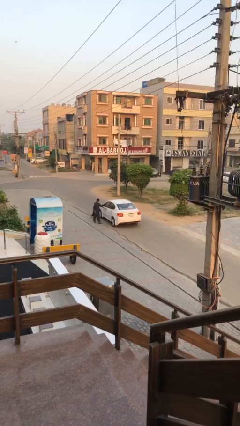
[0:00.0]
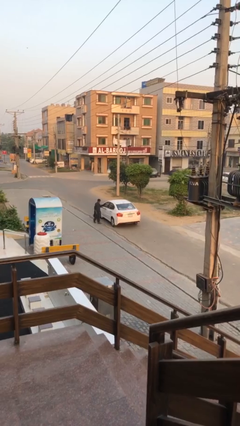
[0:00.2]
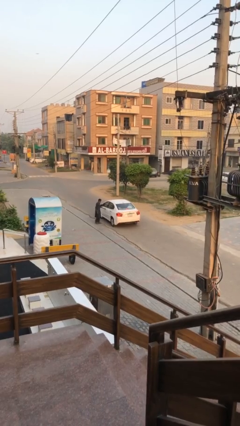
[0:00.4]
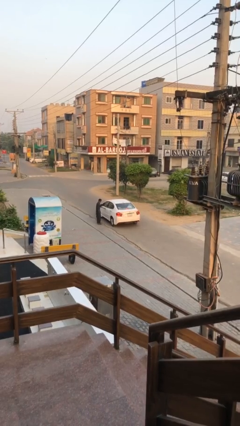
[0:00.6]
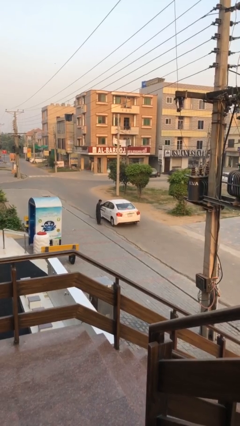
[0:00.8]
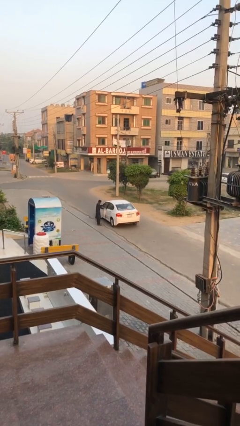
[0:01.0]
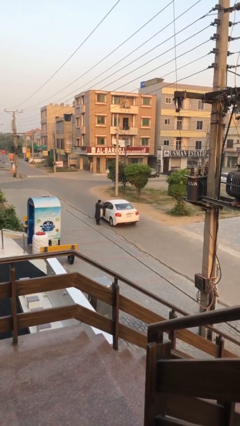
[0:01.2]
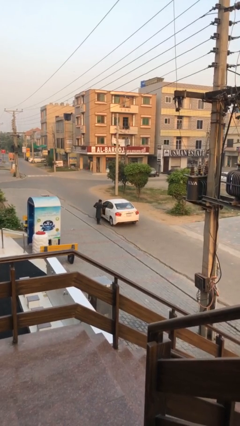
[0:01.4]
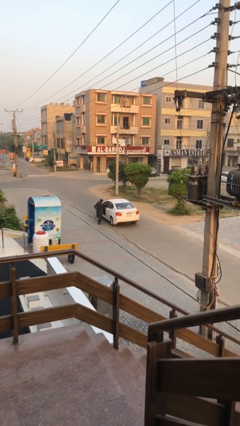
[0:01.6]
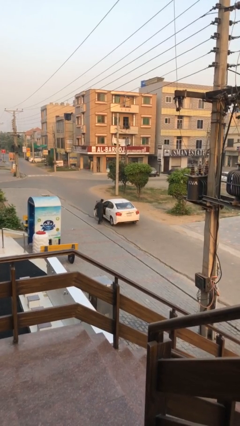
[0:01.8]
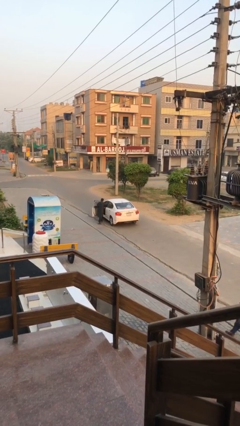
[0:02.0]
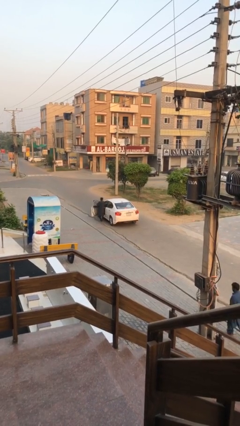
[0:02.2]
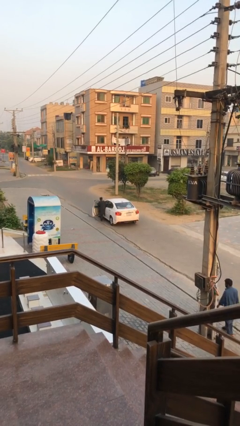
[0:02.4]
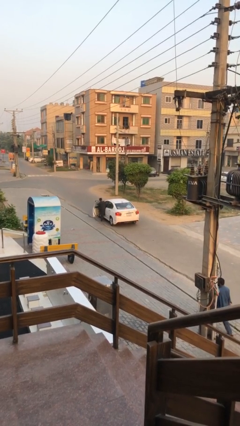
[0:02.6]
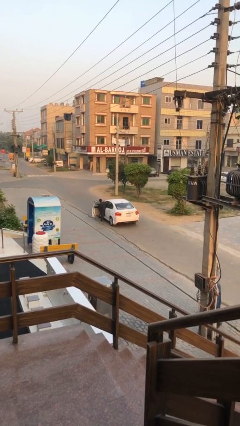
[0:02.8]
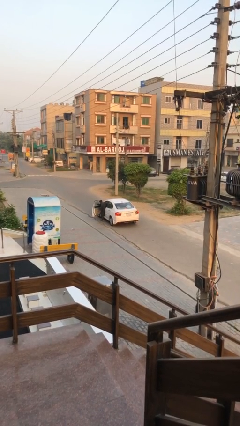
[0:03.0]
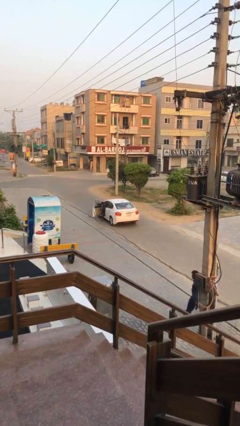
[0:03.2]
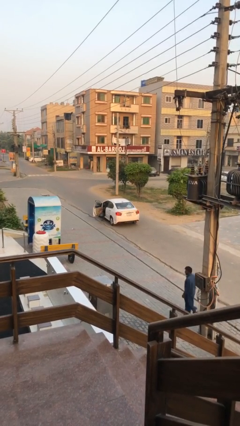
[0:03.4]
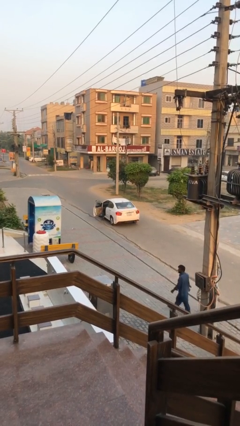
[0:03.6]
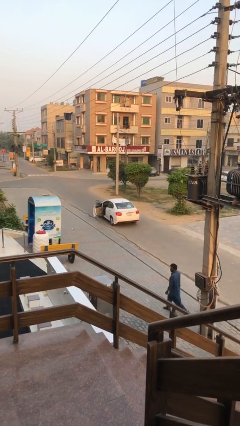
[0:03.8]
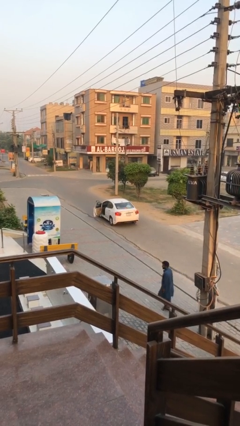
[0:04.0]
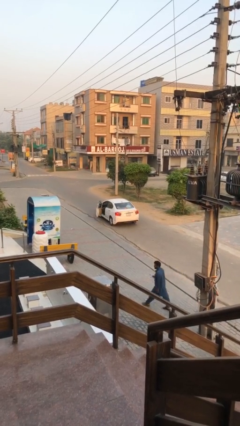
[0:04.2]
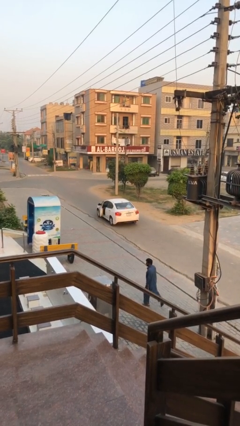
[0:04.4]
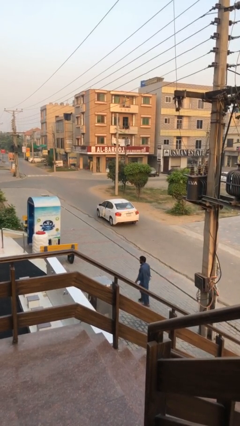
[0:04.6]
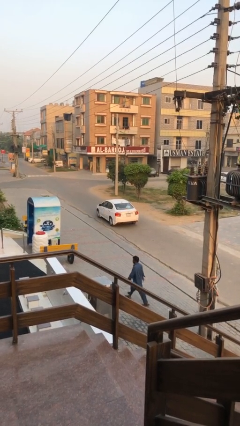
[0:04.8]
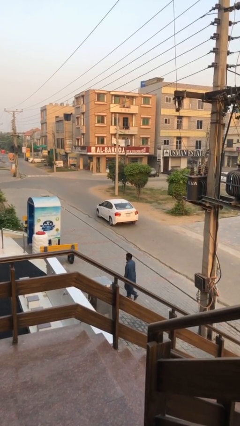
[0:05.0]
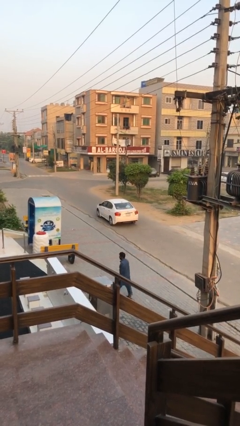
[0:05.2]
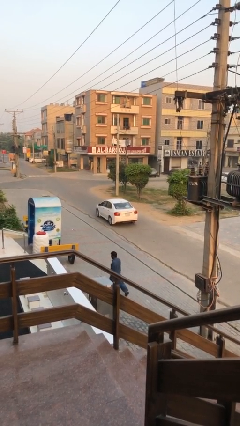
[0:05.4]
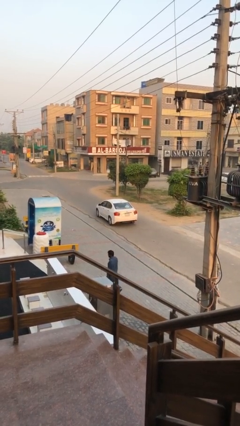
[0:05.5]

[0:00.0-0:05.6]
car picks up person

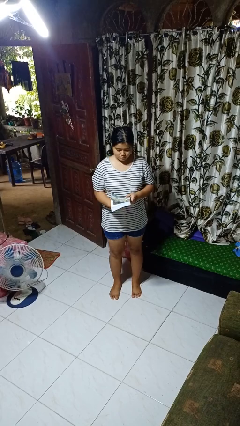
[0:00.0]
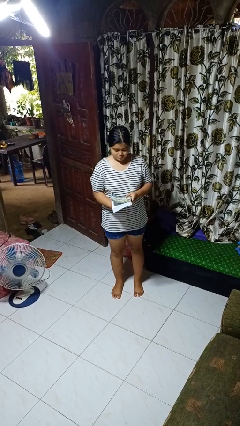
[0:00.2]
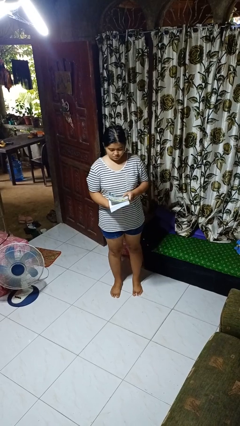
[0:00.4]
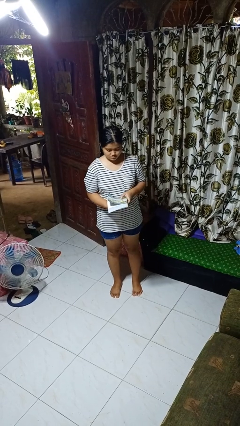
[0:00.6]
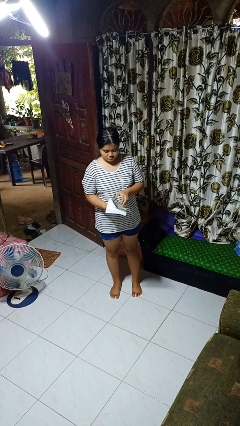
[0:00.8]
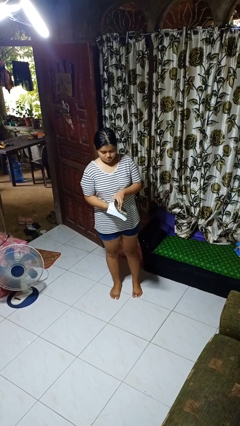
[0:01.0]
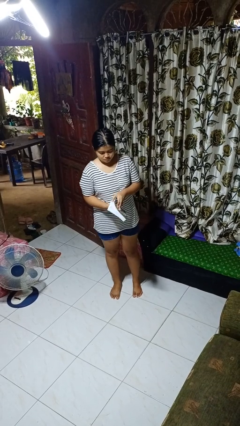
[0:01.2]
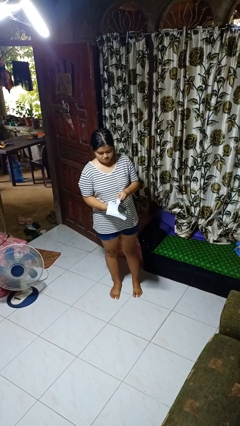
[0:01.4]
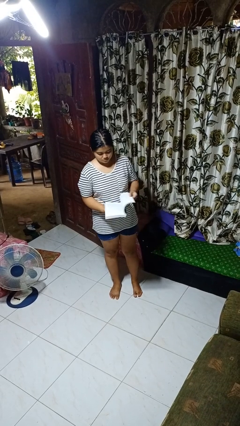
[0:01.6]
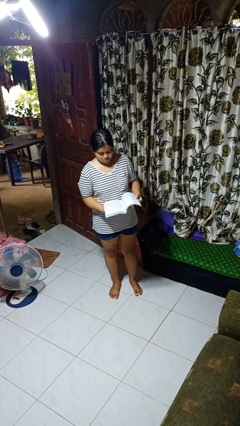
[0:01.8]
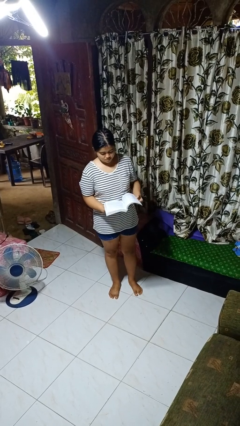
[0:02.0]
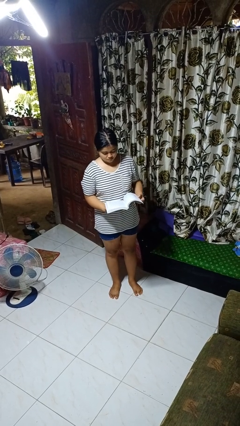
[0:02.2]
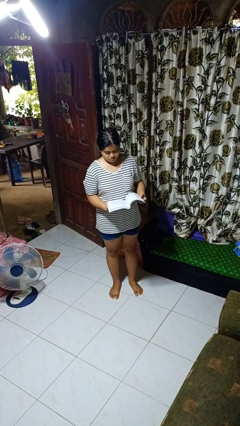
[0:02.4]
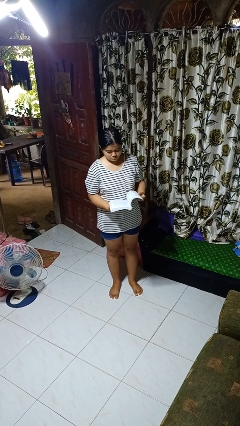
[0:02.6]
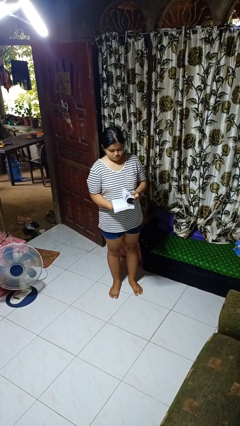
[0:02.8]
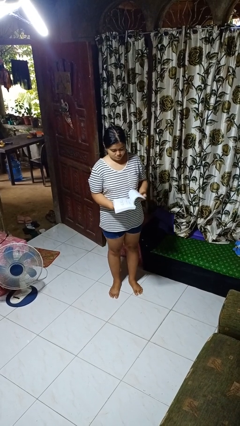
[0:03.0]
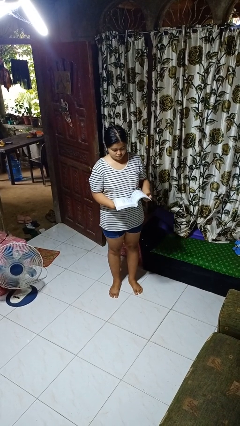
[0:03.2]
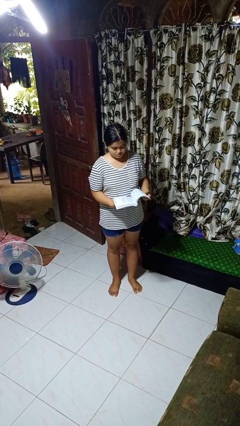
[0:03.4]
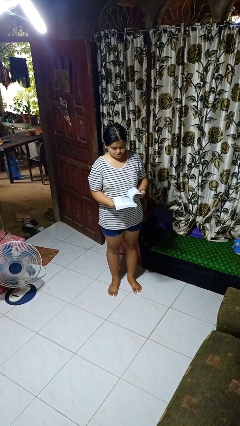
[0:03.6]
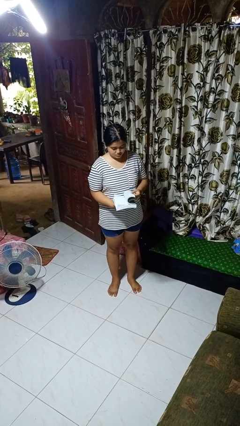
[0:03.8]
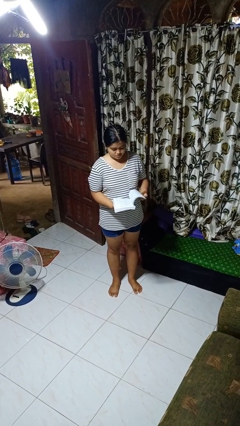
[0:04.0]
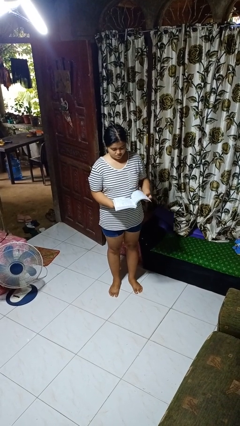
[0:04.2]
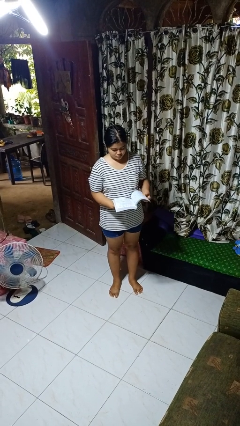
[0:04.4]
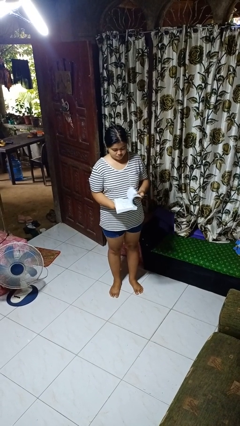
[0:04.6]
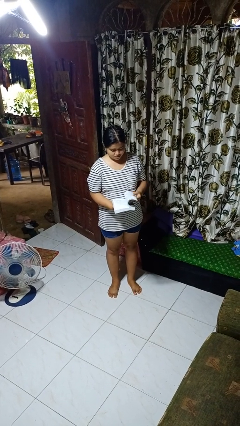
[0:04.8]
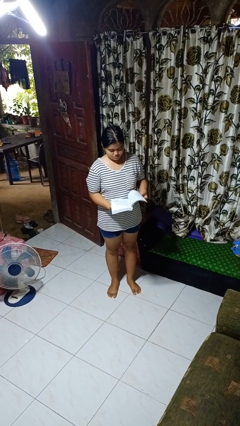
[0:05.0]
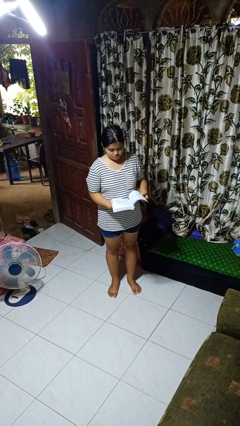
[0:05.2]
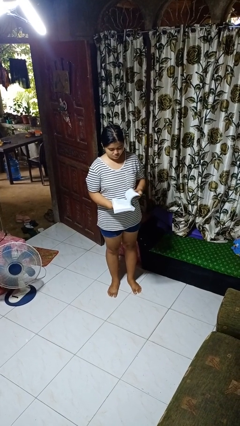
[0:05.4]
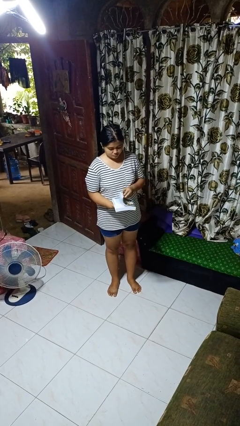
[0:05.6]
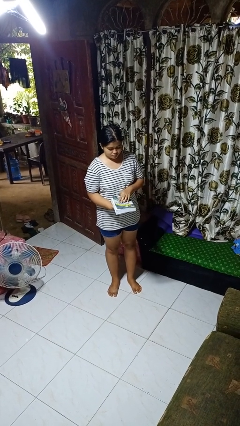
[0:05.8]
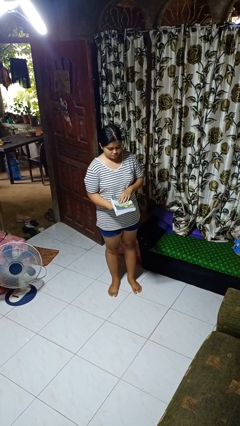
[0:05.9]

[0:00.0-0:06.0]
person reads book

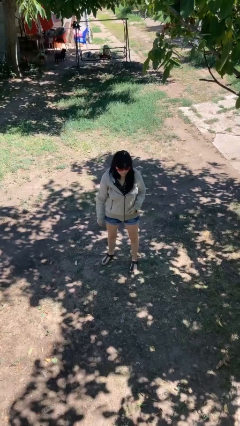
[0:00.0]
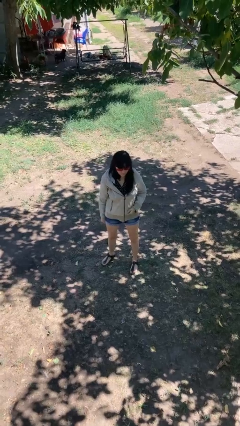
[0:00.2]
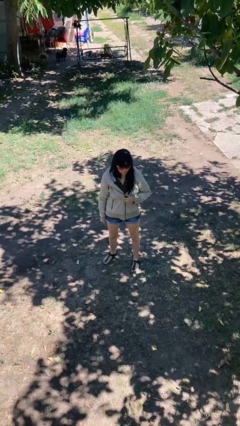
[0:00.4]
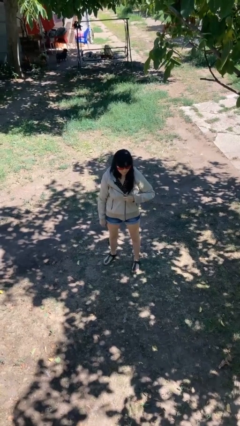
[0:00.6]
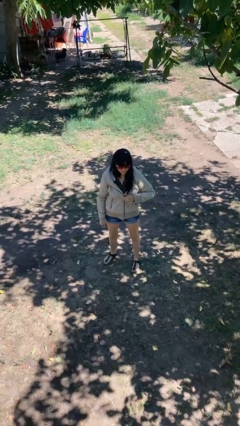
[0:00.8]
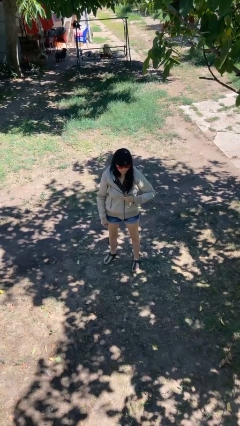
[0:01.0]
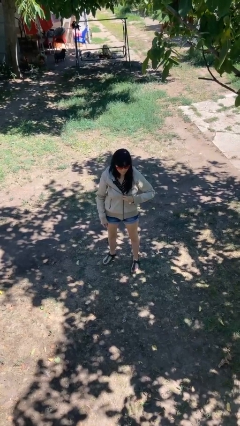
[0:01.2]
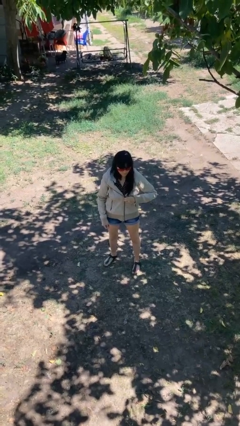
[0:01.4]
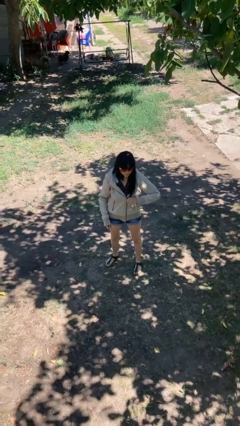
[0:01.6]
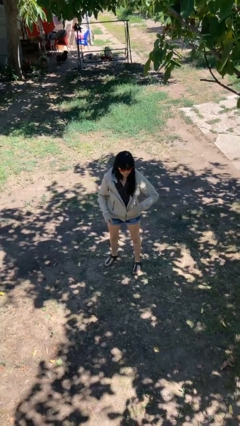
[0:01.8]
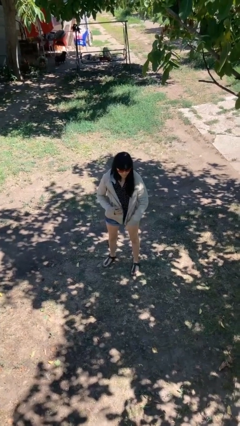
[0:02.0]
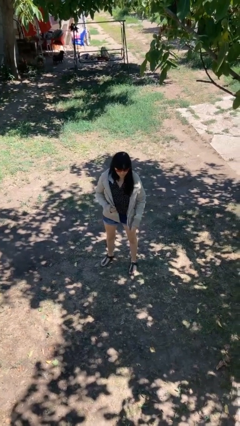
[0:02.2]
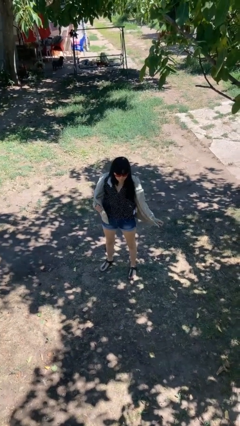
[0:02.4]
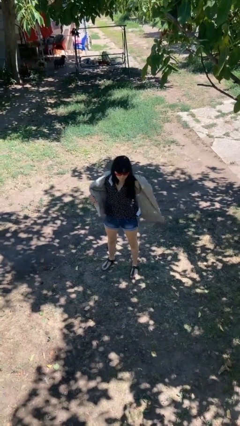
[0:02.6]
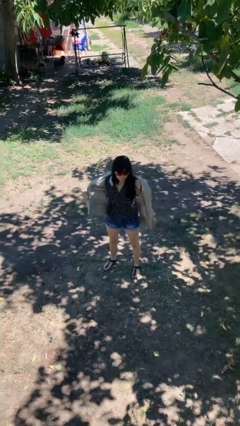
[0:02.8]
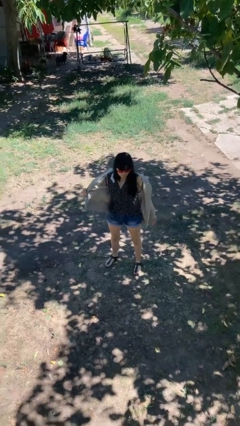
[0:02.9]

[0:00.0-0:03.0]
person unzips jacket

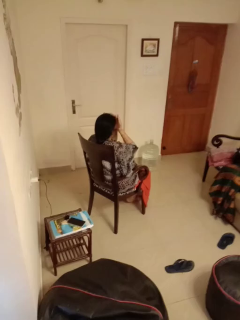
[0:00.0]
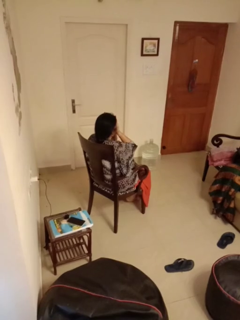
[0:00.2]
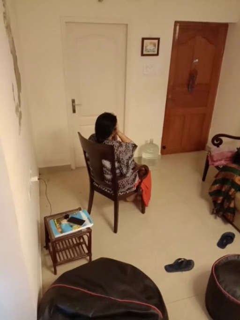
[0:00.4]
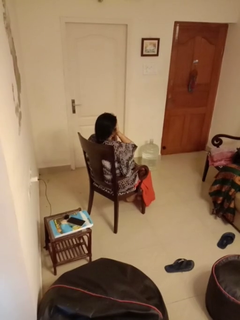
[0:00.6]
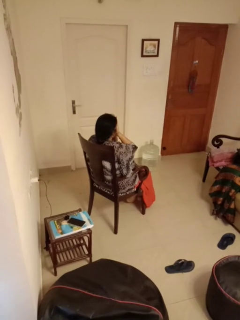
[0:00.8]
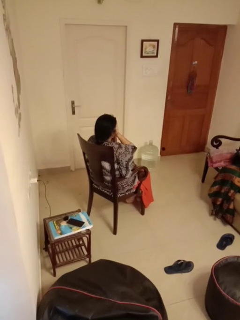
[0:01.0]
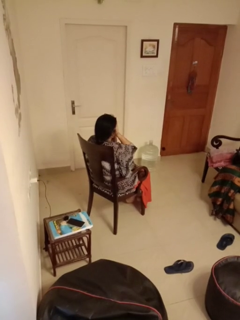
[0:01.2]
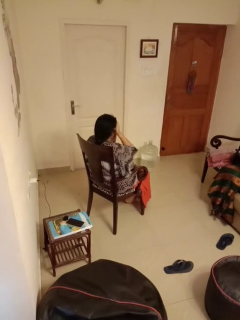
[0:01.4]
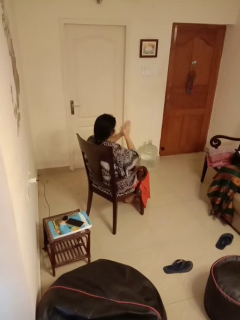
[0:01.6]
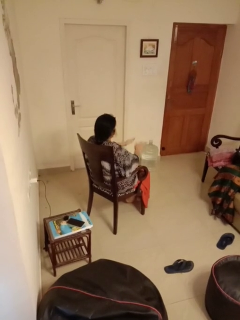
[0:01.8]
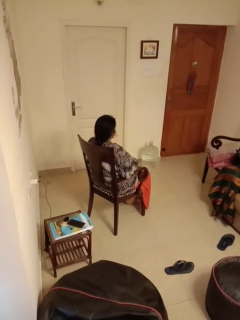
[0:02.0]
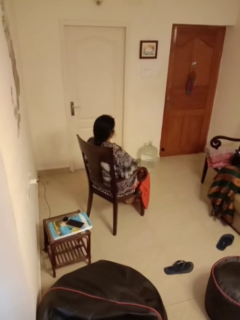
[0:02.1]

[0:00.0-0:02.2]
person covers face with hands

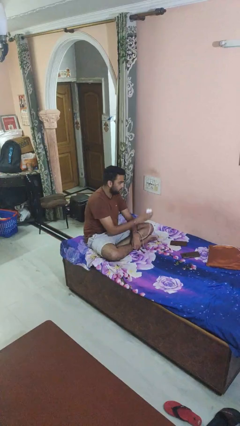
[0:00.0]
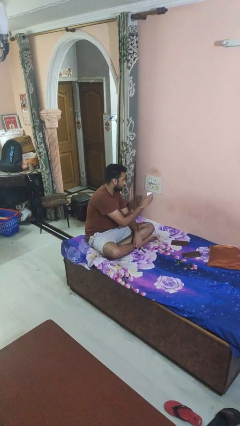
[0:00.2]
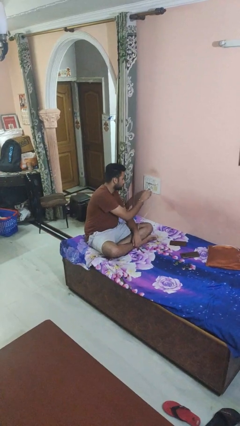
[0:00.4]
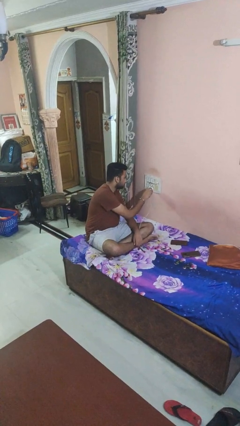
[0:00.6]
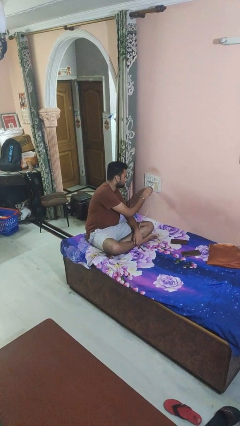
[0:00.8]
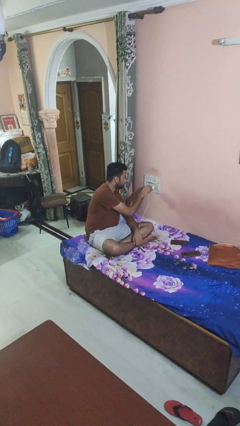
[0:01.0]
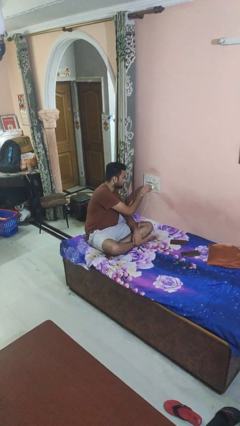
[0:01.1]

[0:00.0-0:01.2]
person plugs into electrical socket

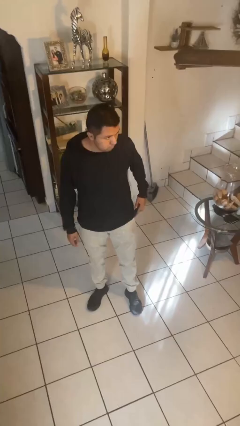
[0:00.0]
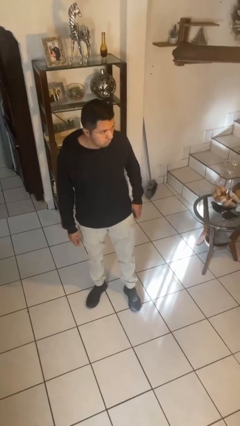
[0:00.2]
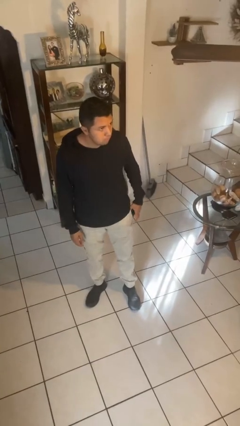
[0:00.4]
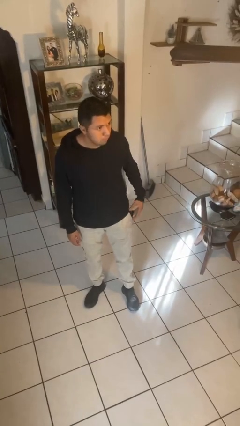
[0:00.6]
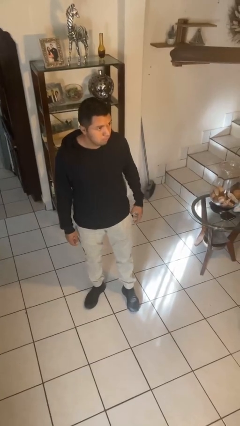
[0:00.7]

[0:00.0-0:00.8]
person puts phone into pocket
